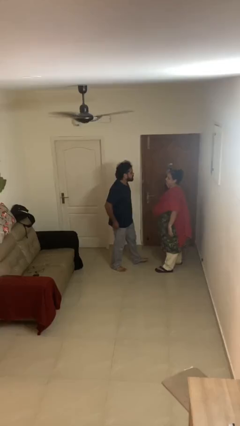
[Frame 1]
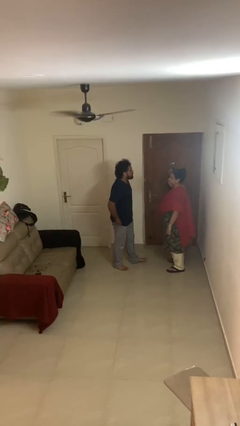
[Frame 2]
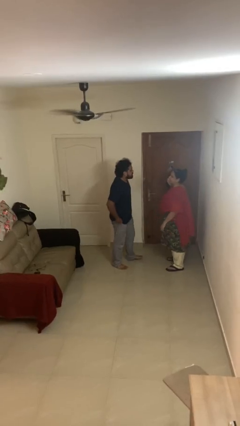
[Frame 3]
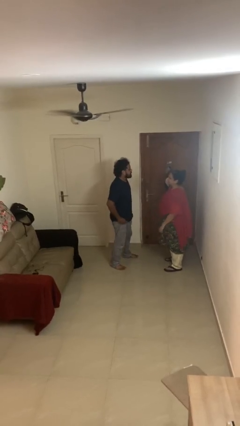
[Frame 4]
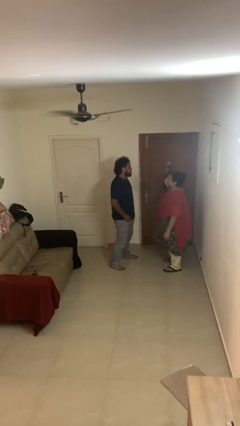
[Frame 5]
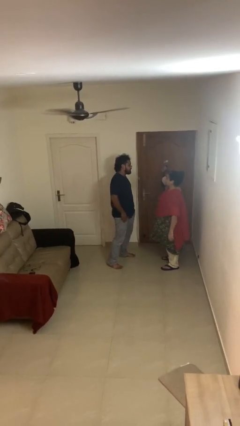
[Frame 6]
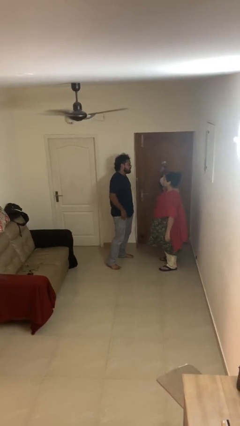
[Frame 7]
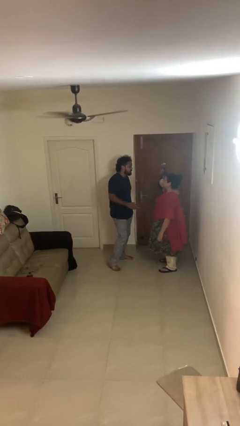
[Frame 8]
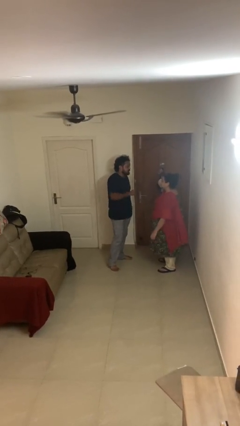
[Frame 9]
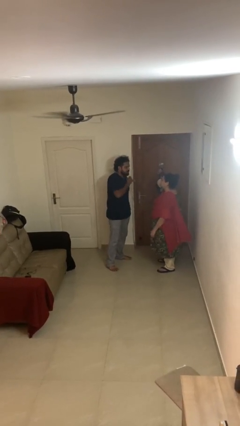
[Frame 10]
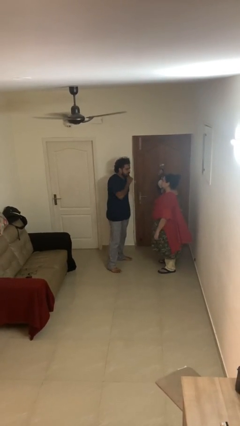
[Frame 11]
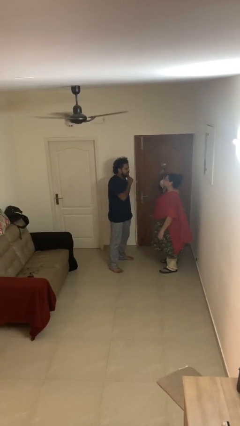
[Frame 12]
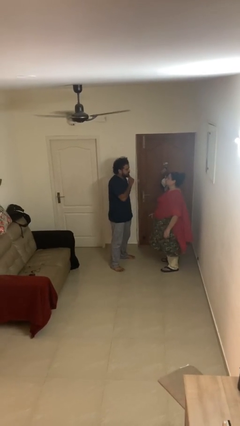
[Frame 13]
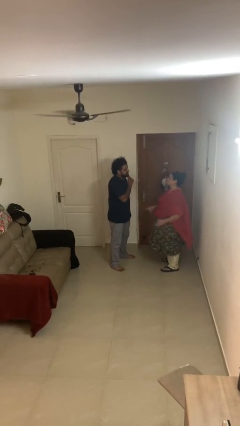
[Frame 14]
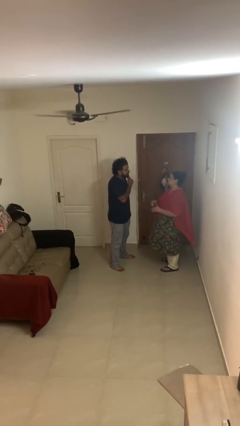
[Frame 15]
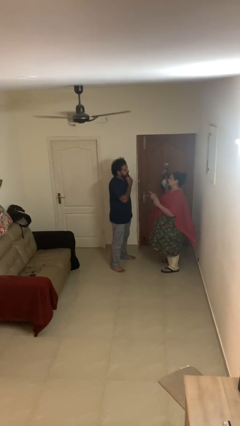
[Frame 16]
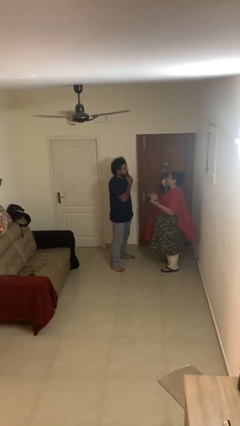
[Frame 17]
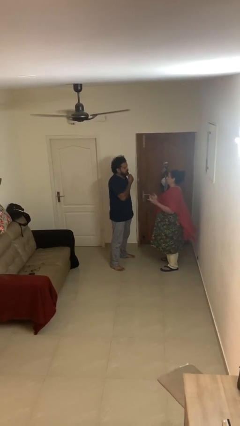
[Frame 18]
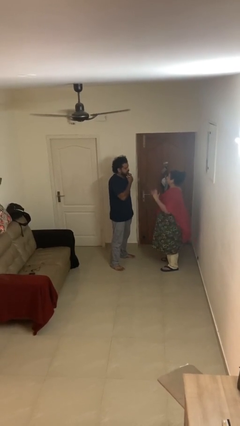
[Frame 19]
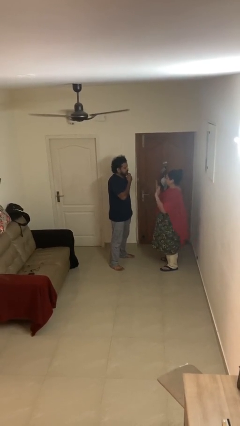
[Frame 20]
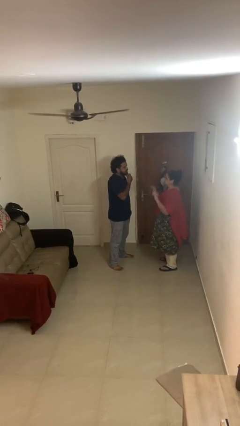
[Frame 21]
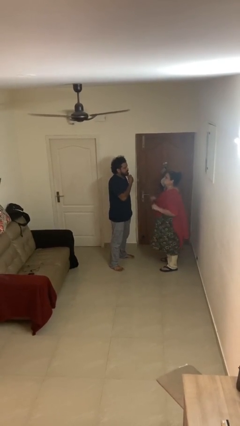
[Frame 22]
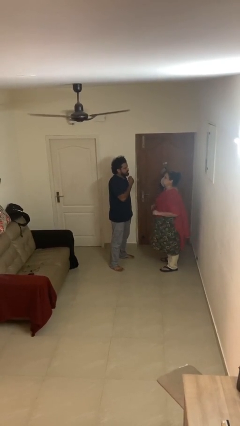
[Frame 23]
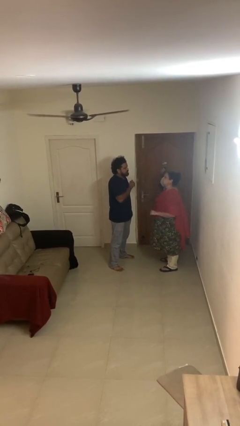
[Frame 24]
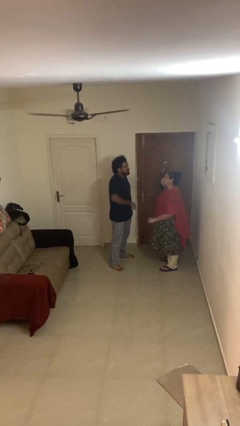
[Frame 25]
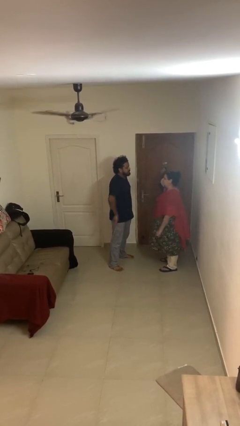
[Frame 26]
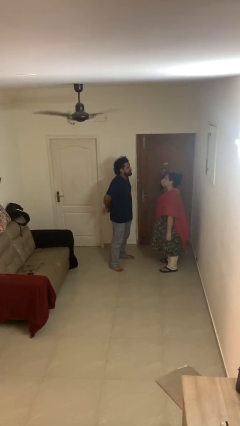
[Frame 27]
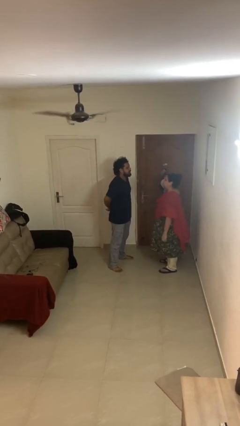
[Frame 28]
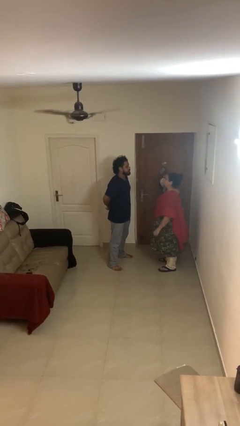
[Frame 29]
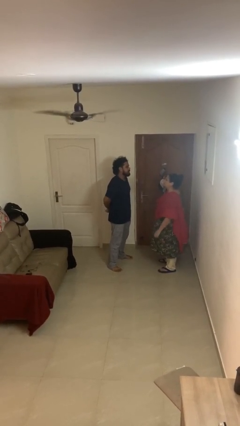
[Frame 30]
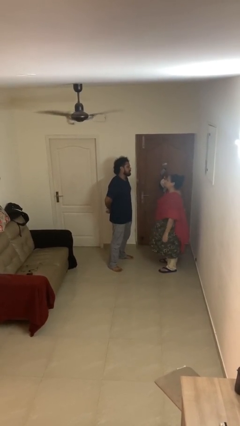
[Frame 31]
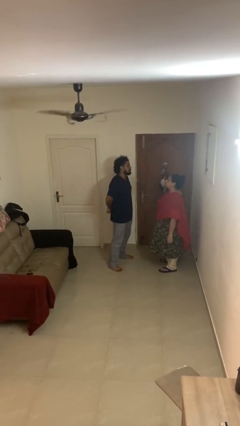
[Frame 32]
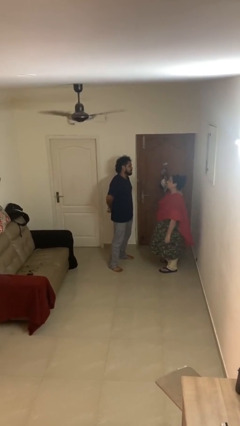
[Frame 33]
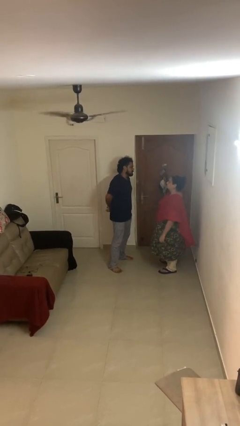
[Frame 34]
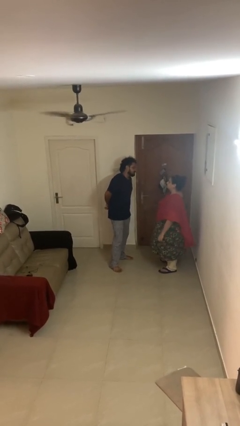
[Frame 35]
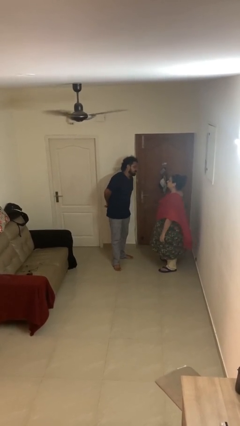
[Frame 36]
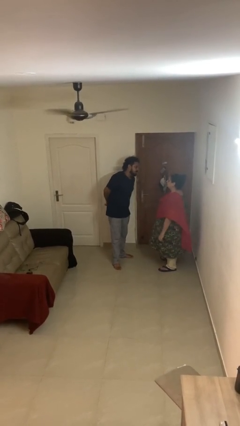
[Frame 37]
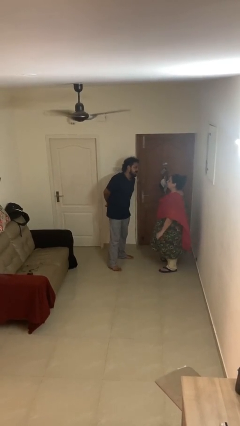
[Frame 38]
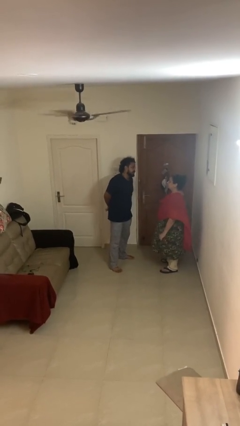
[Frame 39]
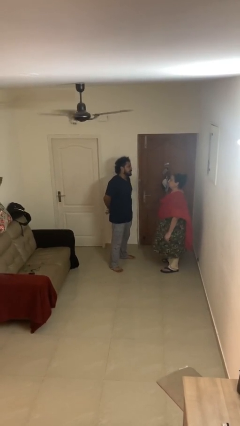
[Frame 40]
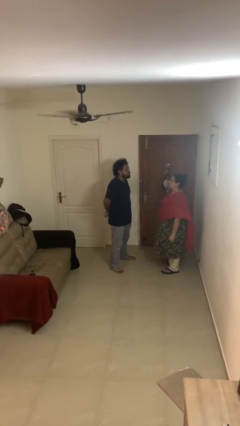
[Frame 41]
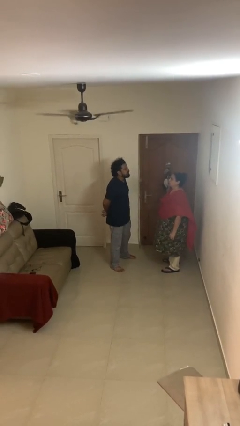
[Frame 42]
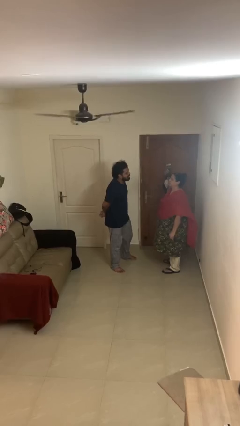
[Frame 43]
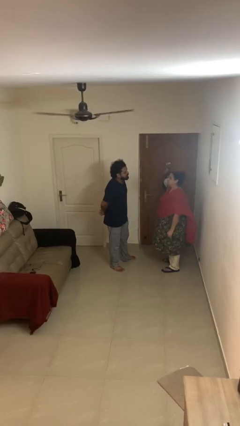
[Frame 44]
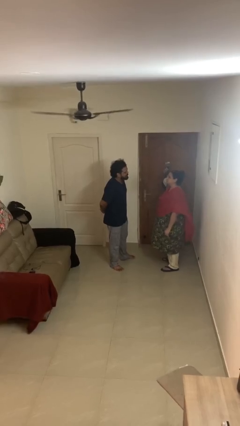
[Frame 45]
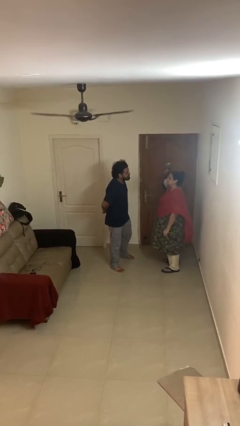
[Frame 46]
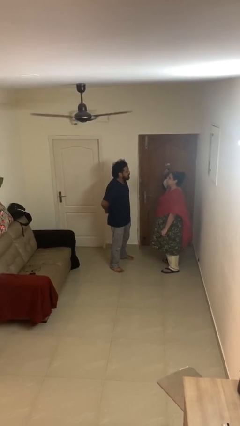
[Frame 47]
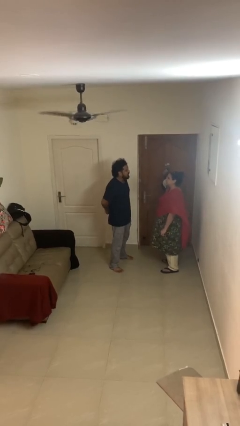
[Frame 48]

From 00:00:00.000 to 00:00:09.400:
person talks to person

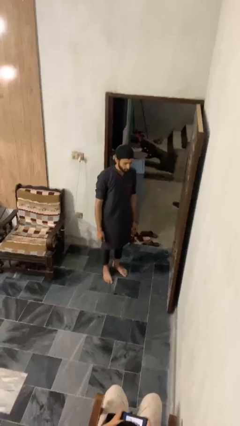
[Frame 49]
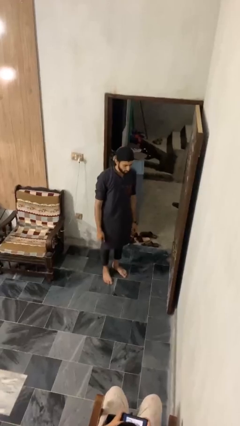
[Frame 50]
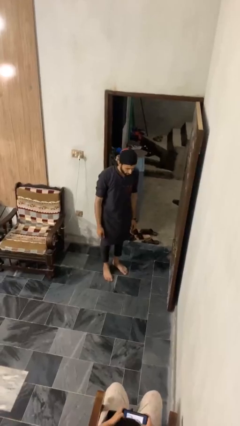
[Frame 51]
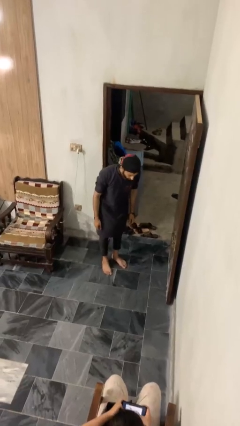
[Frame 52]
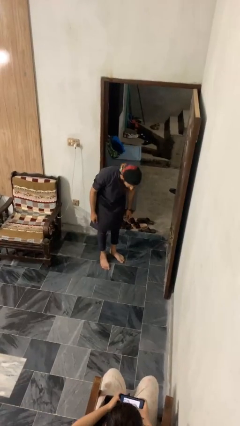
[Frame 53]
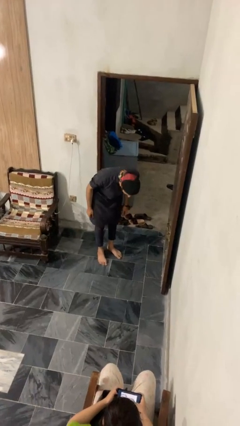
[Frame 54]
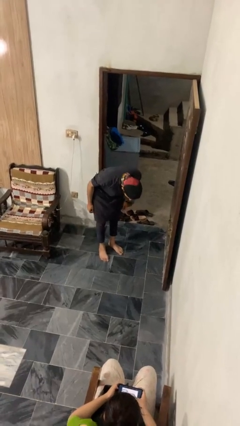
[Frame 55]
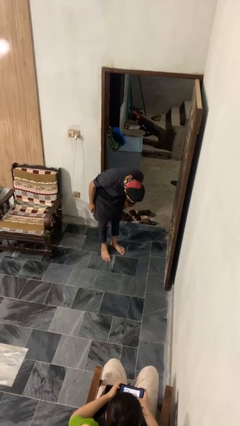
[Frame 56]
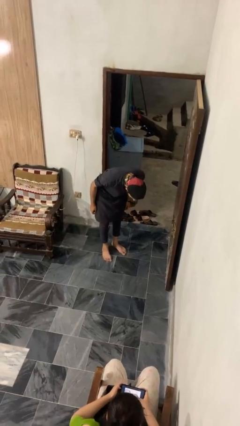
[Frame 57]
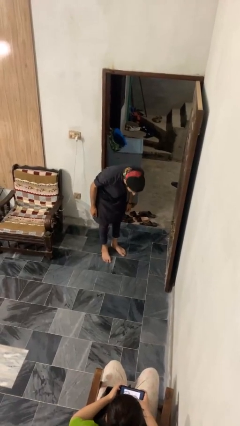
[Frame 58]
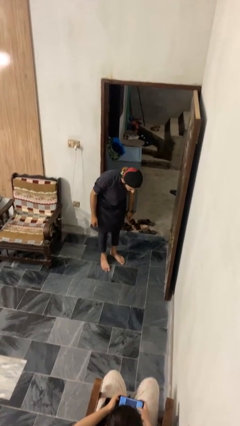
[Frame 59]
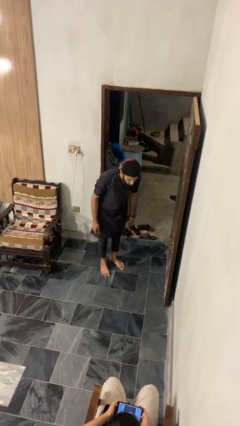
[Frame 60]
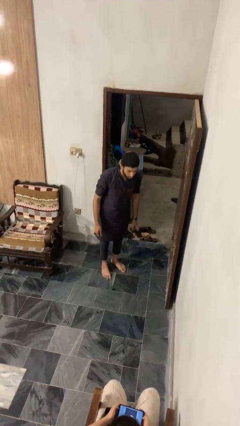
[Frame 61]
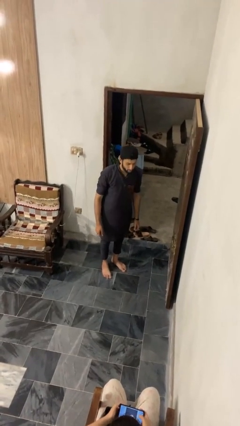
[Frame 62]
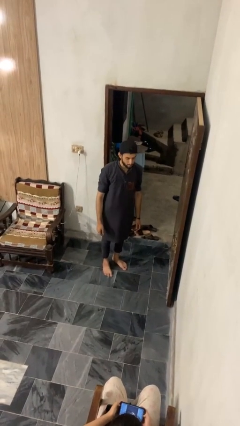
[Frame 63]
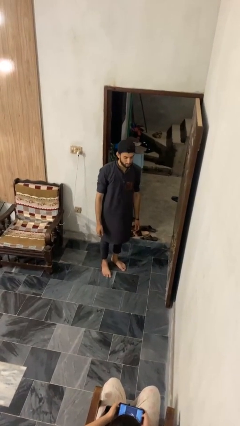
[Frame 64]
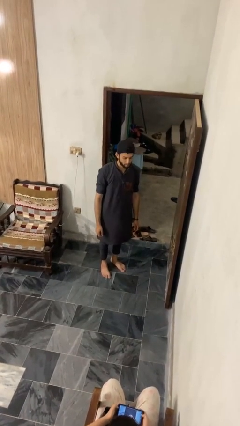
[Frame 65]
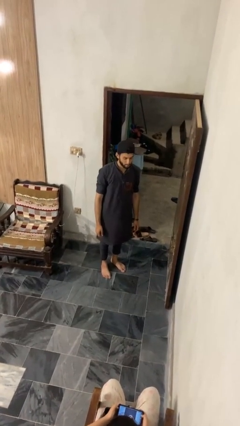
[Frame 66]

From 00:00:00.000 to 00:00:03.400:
person bows

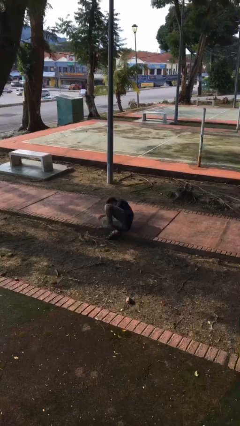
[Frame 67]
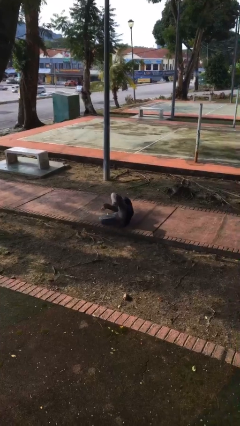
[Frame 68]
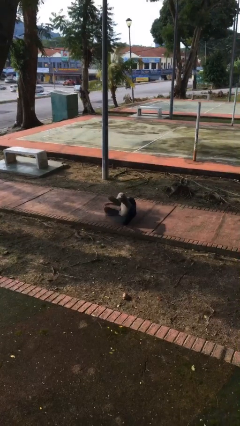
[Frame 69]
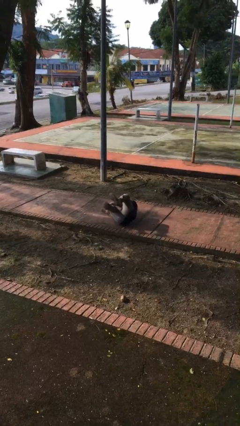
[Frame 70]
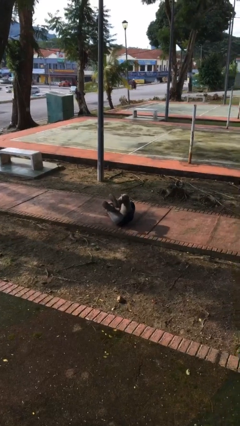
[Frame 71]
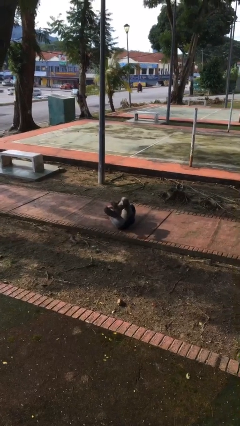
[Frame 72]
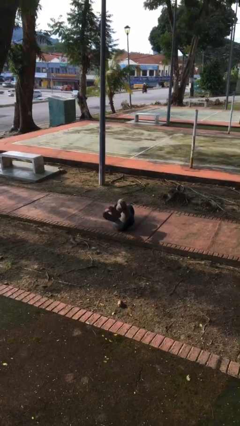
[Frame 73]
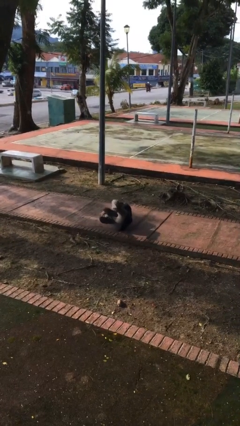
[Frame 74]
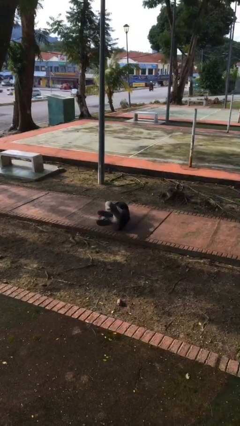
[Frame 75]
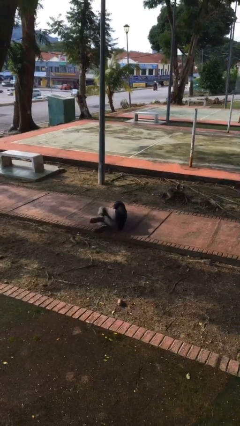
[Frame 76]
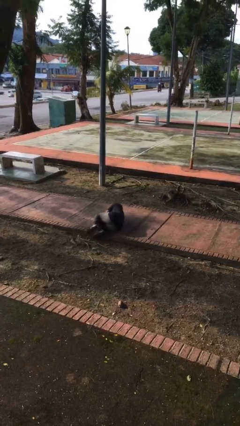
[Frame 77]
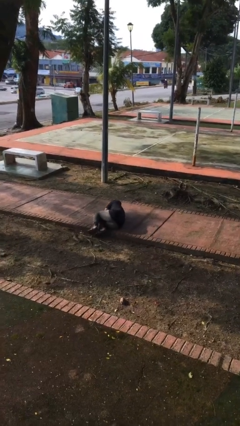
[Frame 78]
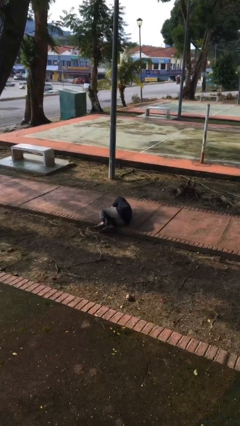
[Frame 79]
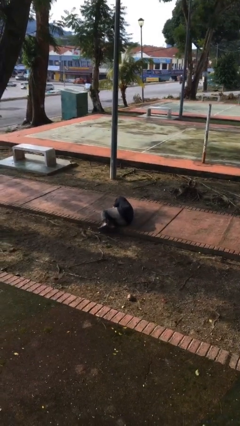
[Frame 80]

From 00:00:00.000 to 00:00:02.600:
person lies down on floor

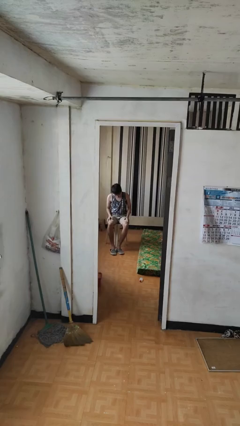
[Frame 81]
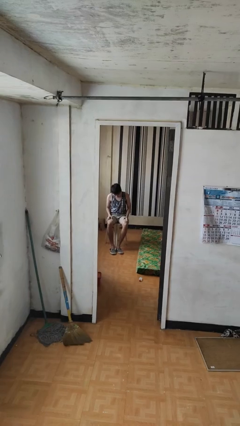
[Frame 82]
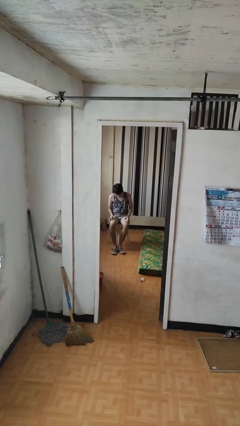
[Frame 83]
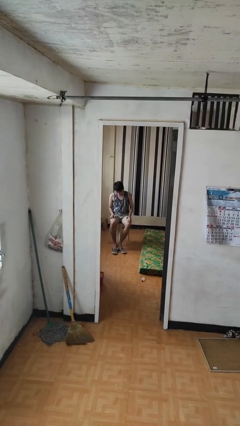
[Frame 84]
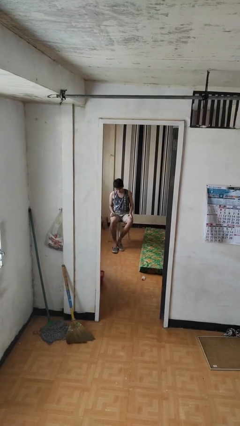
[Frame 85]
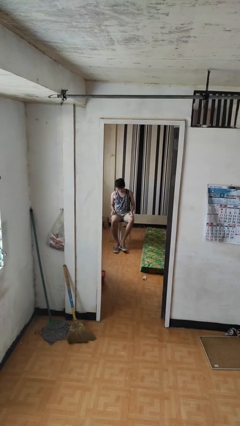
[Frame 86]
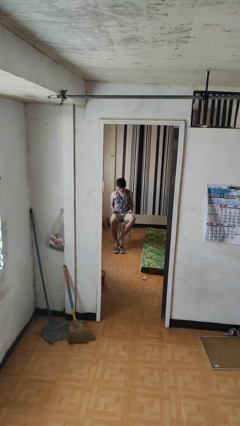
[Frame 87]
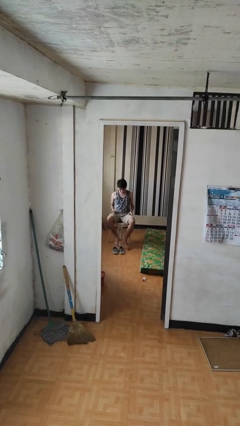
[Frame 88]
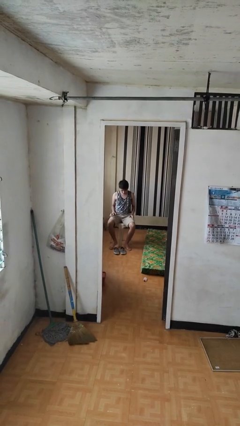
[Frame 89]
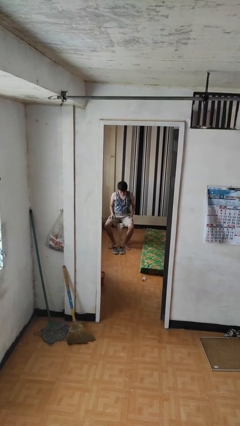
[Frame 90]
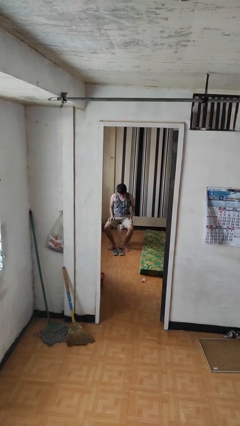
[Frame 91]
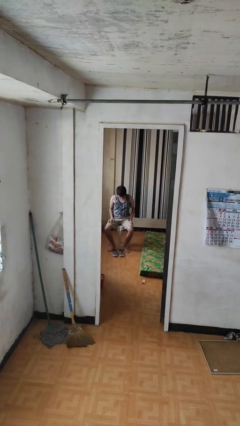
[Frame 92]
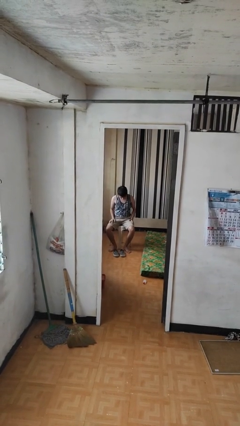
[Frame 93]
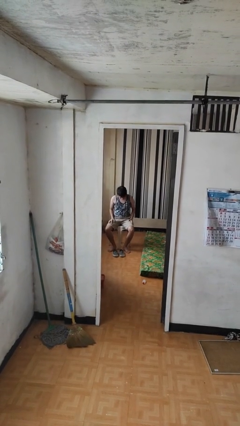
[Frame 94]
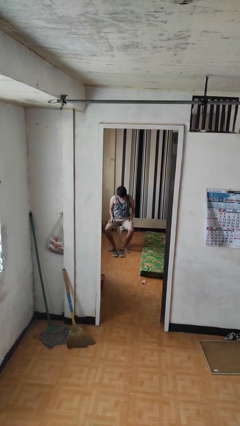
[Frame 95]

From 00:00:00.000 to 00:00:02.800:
person takes off shoes
